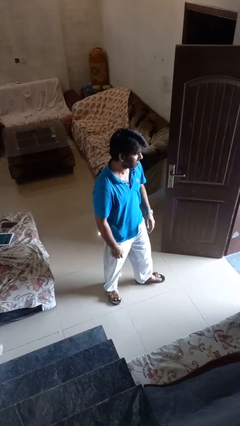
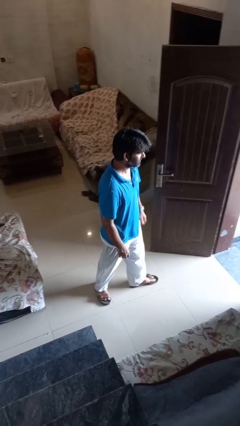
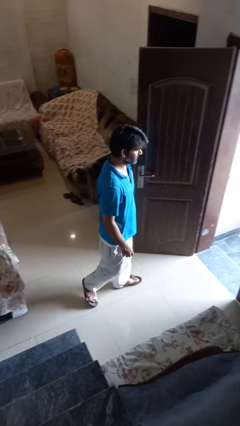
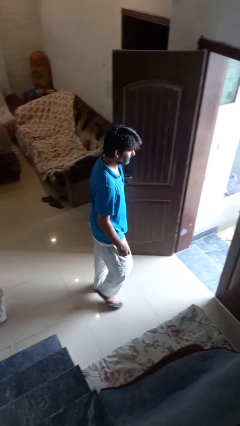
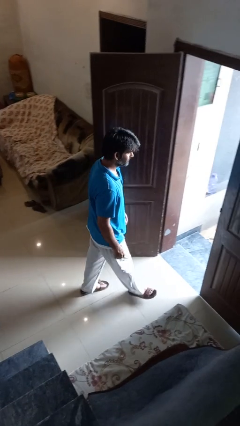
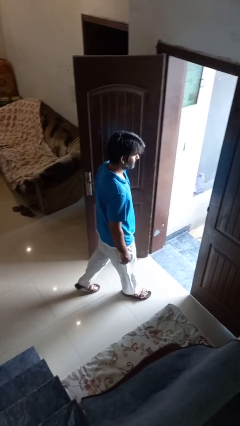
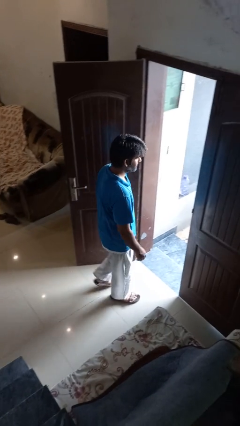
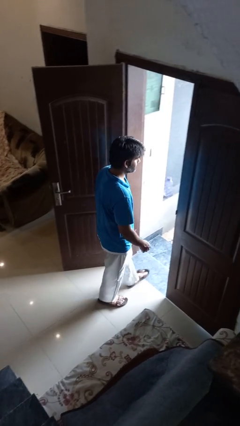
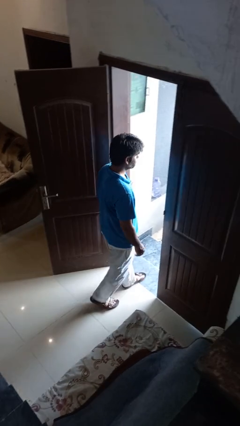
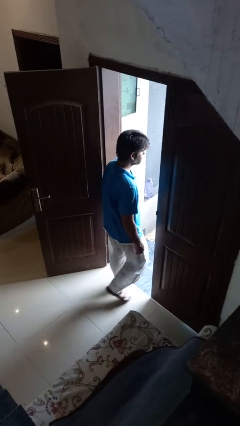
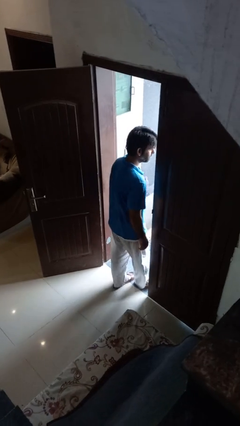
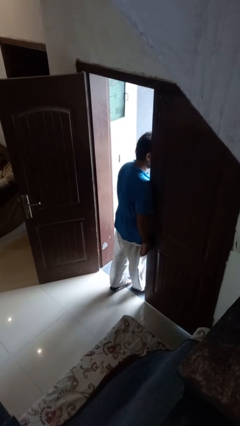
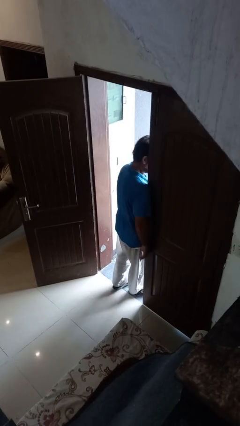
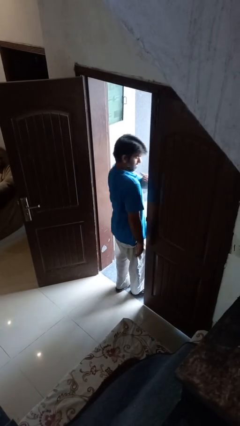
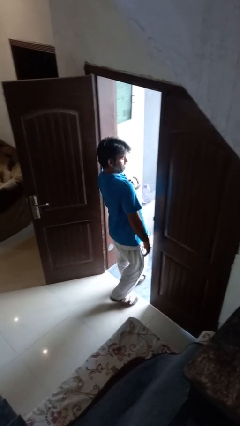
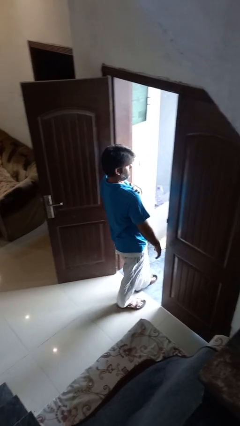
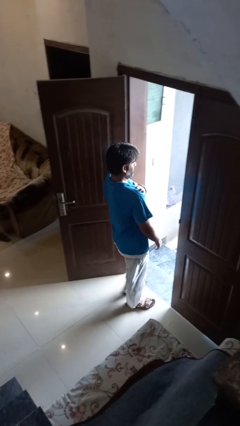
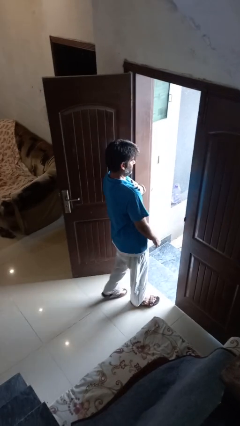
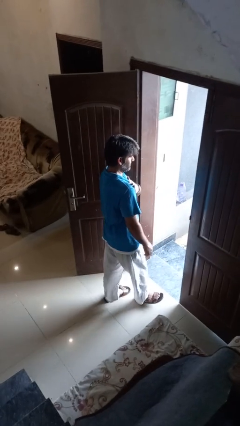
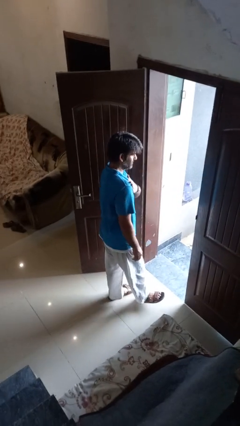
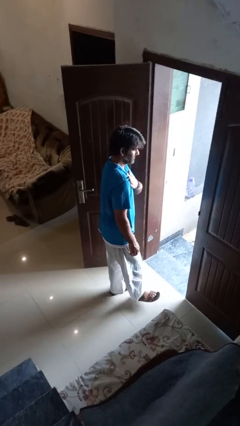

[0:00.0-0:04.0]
person bumps into wall

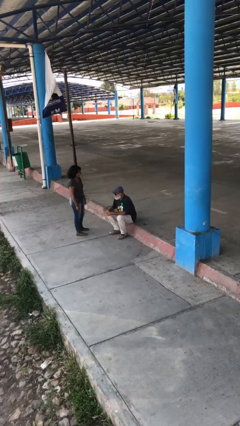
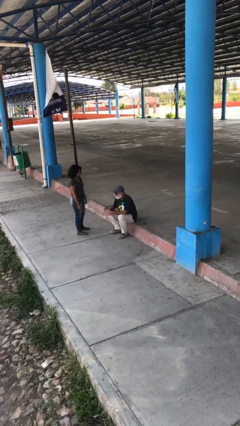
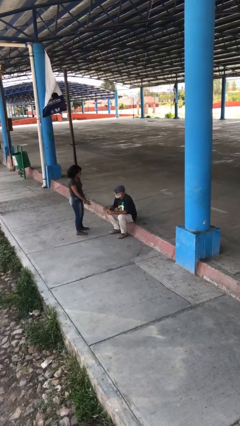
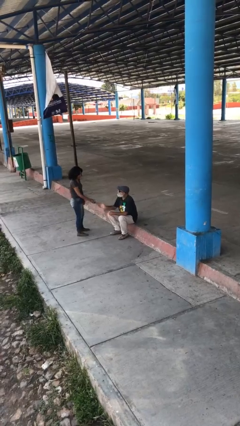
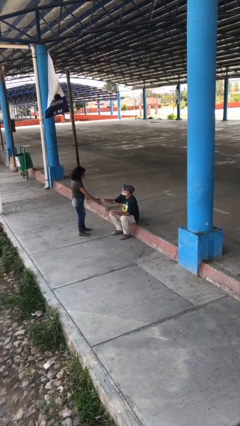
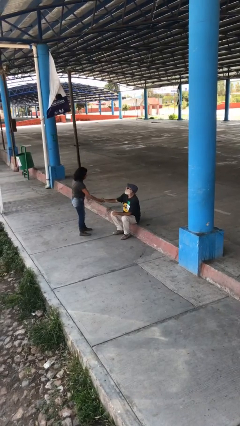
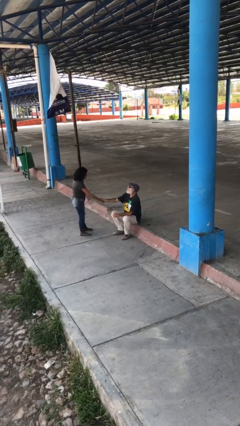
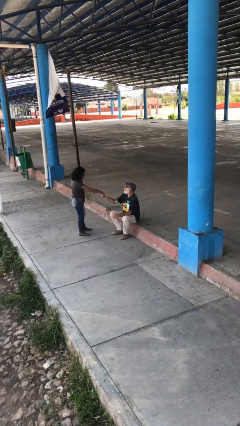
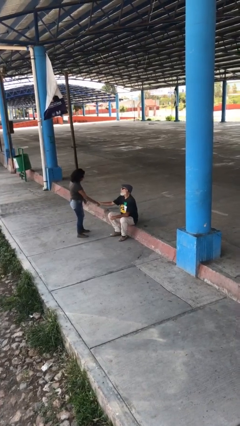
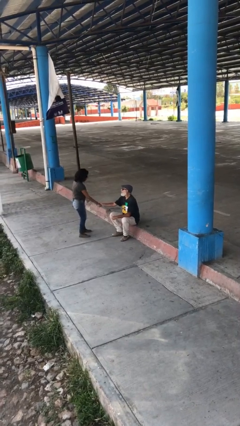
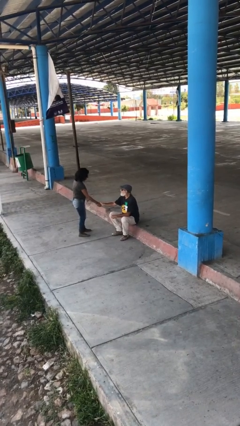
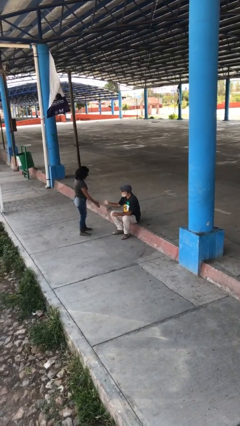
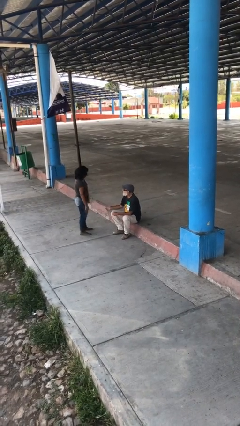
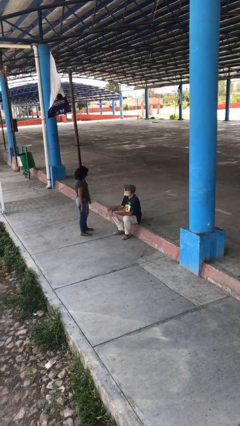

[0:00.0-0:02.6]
person shakes hand

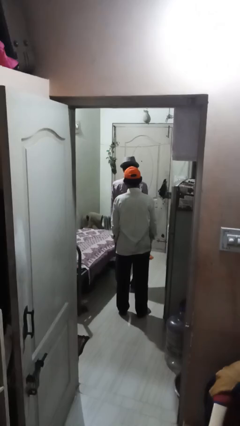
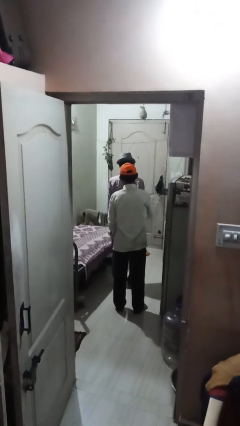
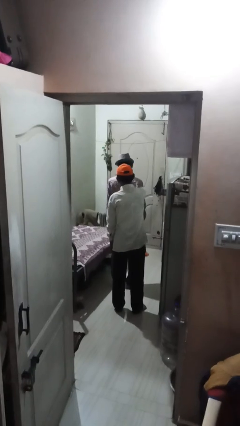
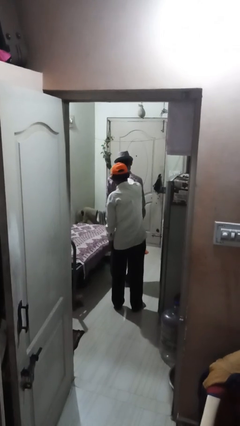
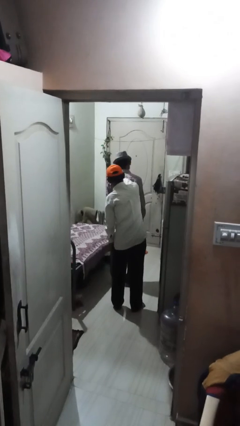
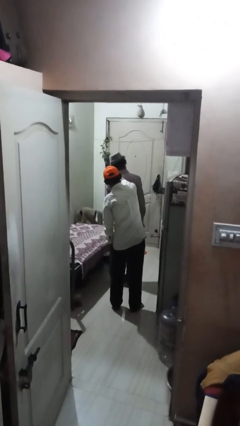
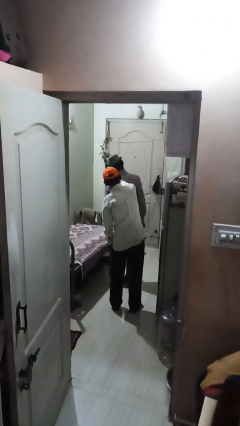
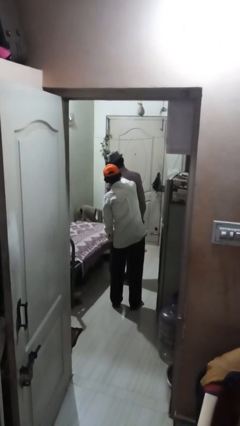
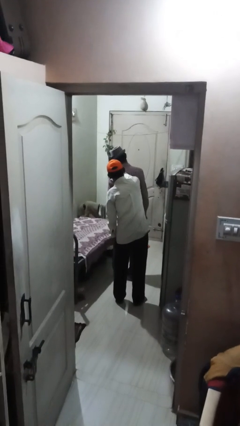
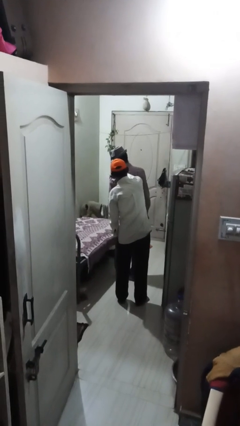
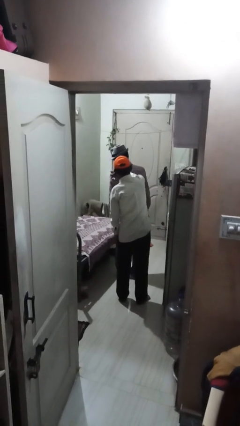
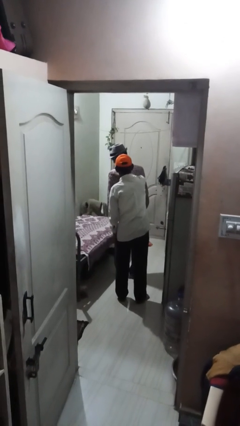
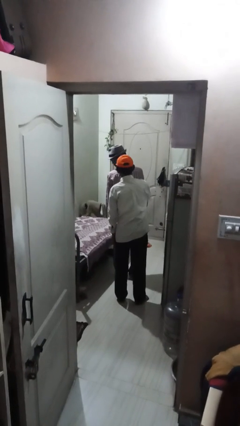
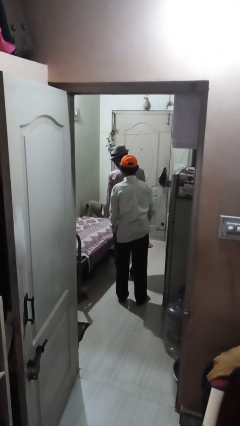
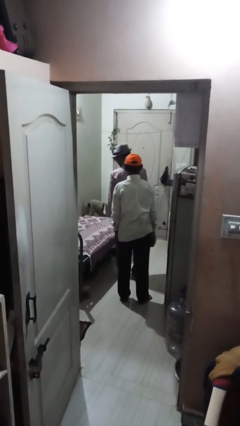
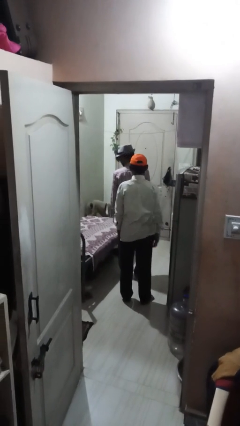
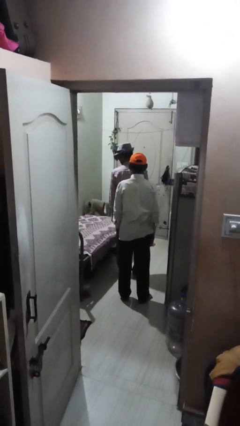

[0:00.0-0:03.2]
person touches back of person

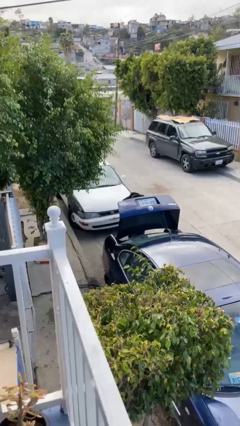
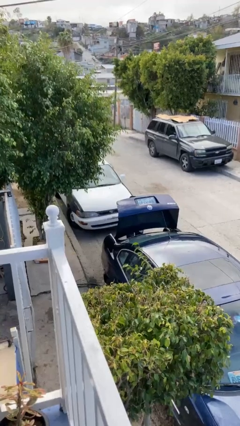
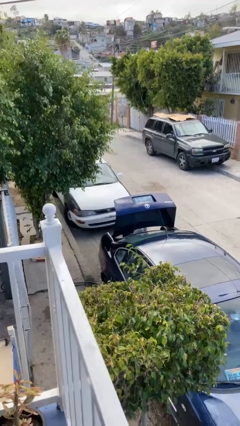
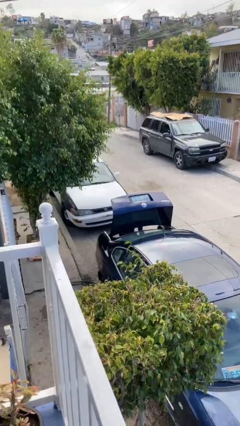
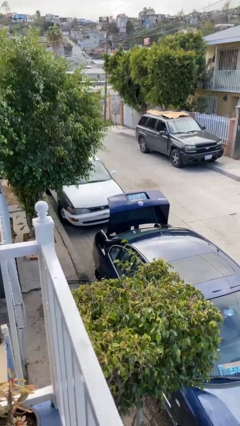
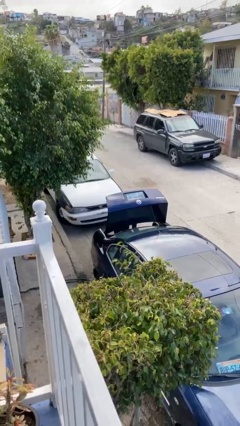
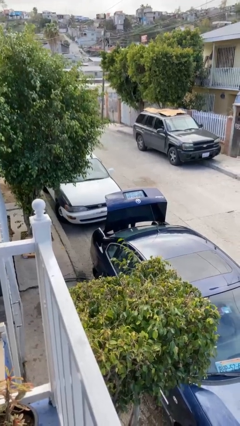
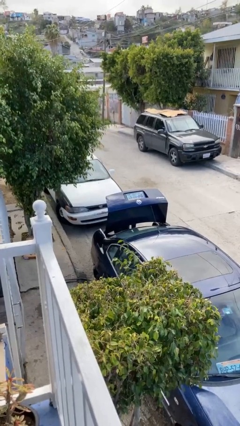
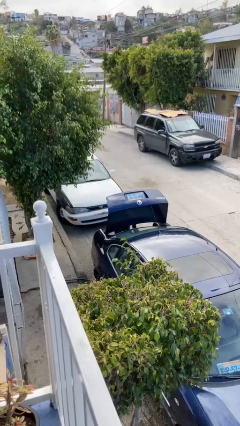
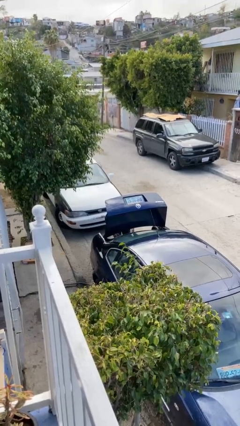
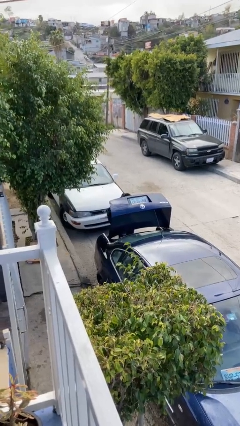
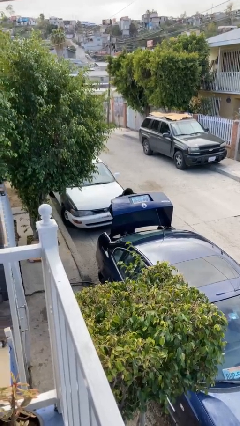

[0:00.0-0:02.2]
person loads car

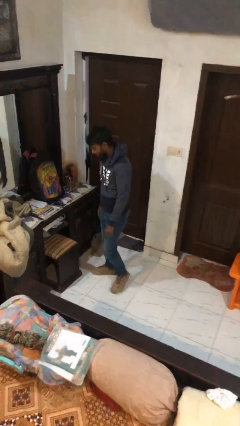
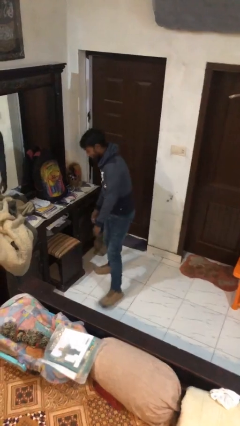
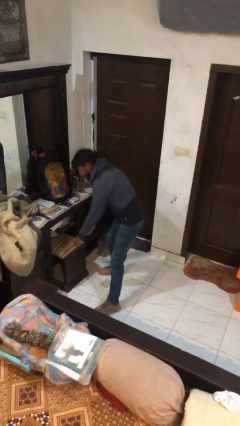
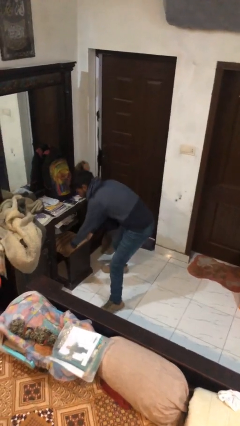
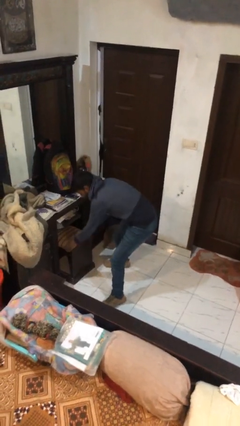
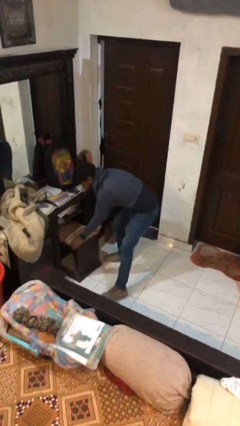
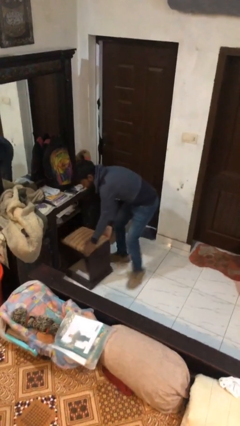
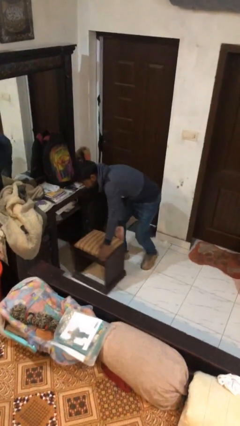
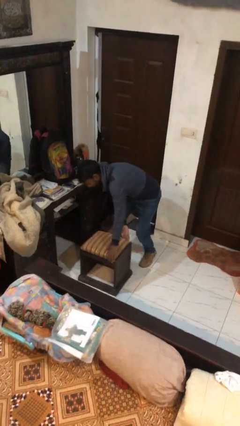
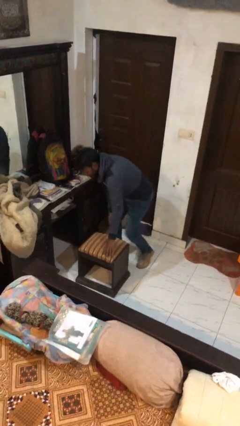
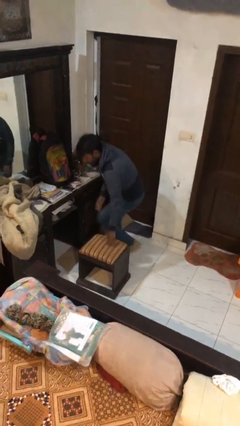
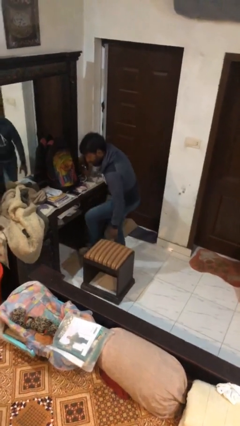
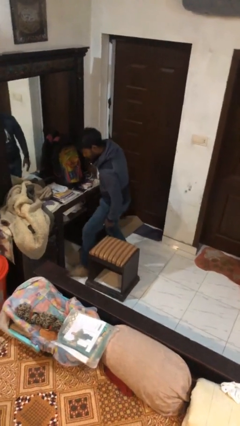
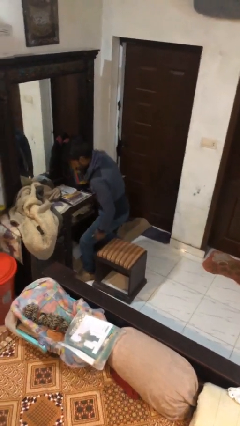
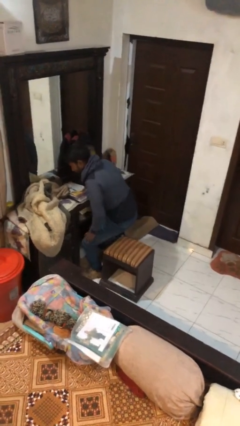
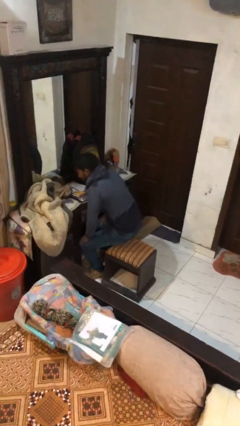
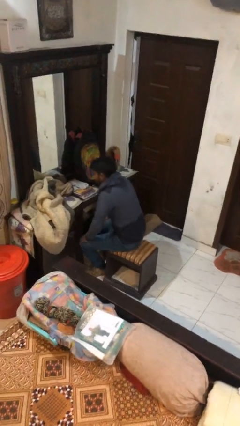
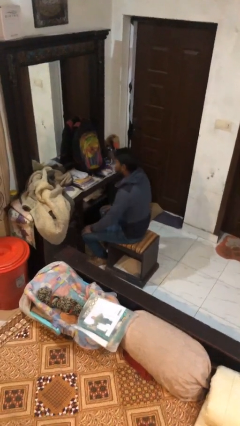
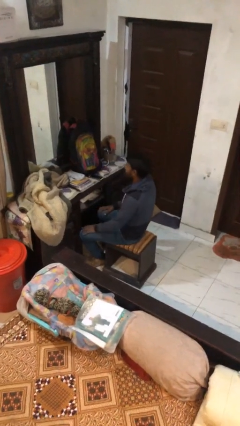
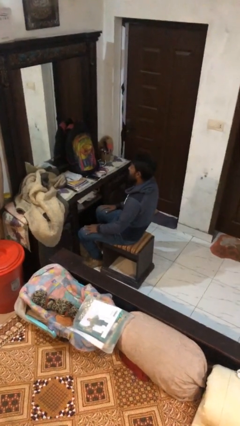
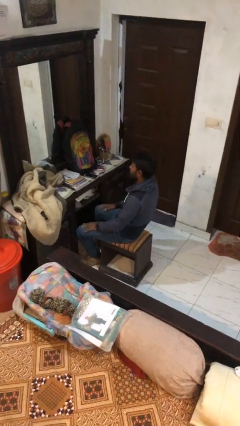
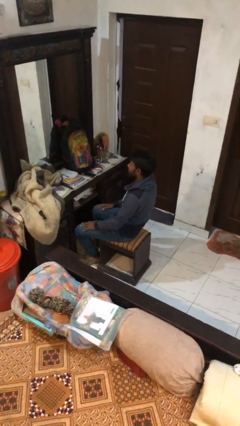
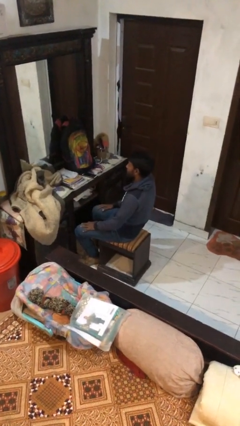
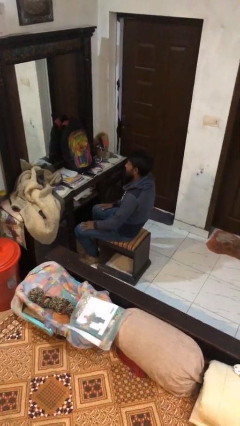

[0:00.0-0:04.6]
person sits down

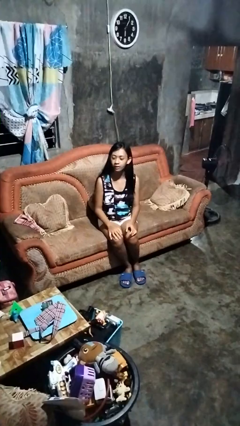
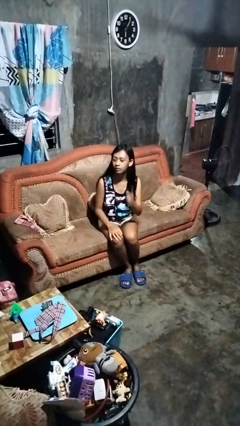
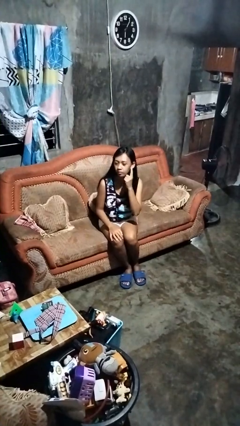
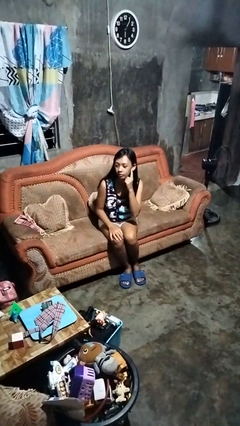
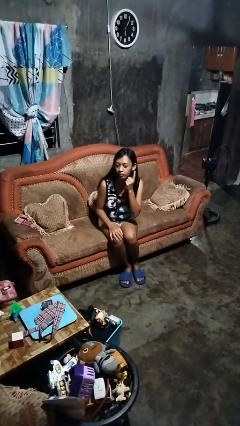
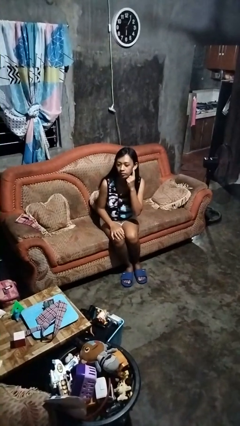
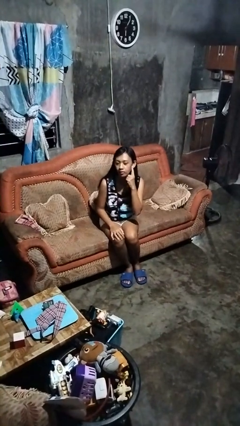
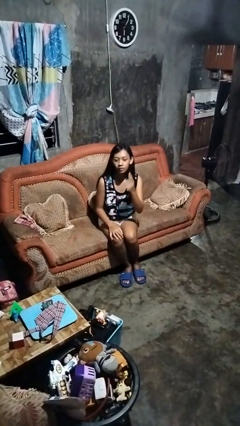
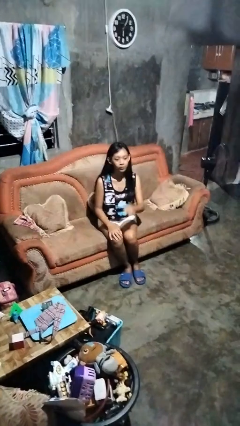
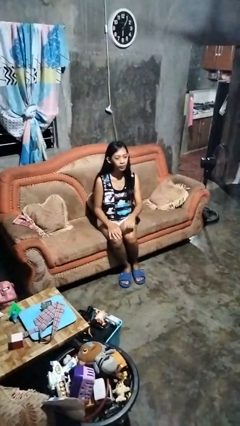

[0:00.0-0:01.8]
person gestures listen closely
